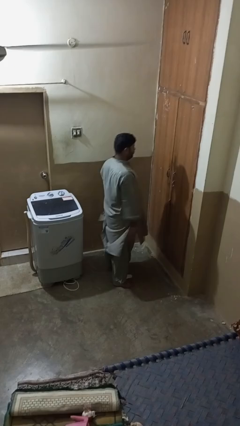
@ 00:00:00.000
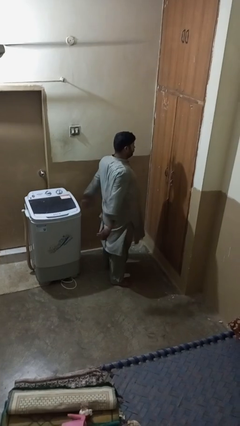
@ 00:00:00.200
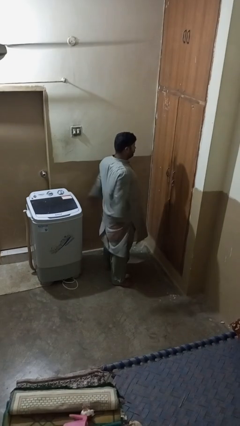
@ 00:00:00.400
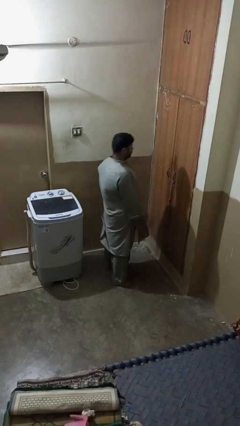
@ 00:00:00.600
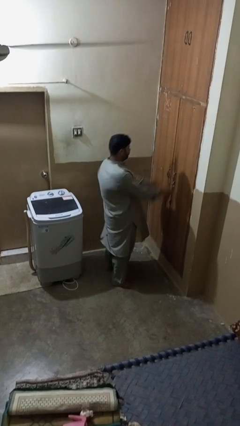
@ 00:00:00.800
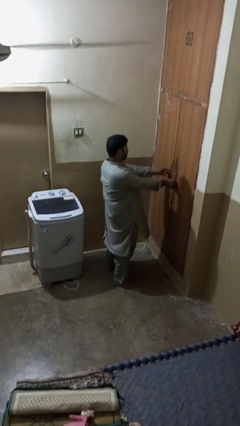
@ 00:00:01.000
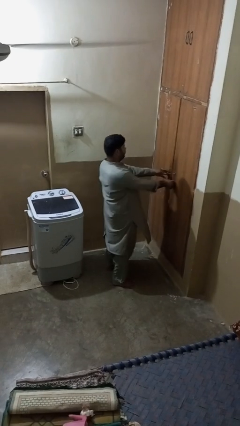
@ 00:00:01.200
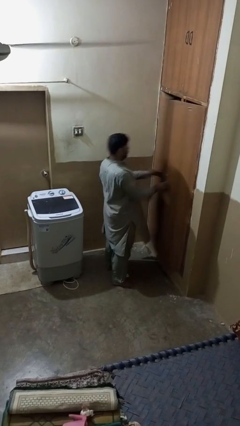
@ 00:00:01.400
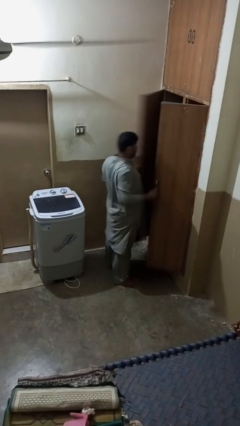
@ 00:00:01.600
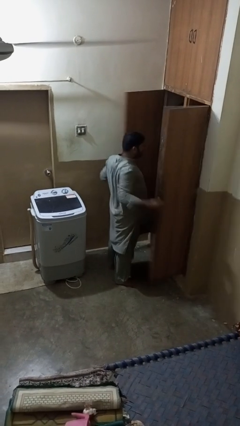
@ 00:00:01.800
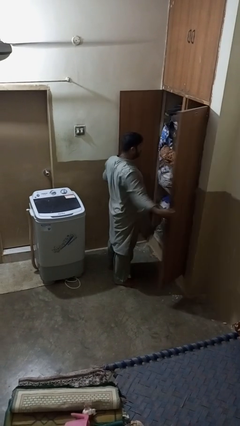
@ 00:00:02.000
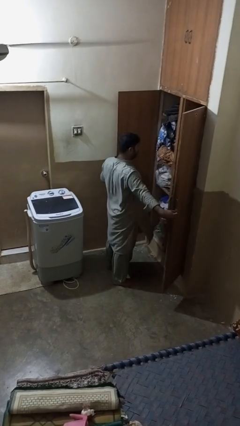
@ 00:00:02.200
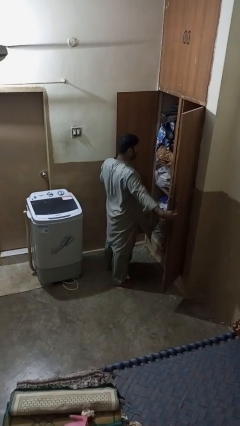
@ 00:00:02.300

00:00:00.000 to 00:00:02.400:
person opens closet door

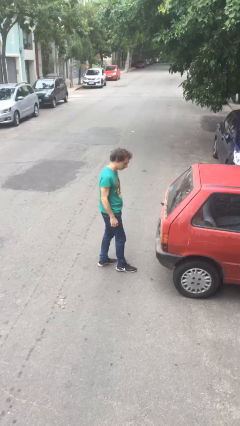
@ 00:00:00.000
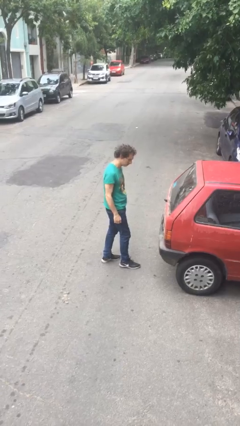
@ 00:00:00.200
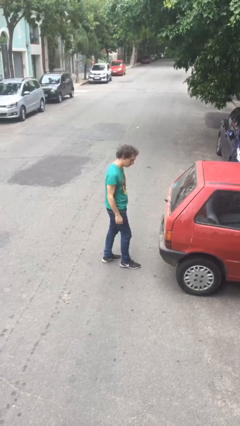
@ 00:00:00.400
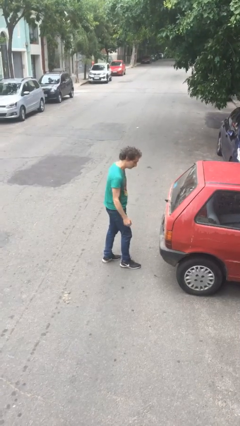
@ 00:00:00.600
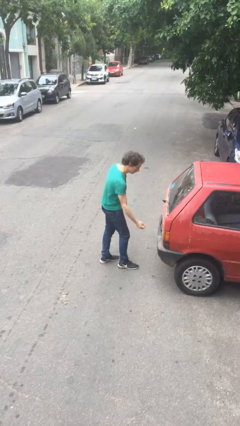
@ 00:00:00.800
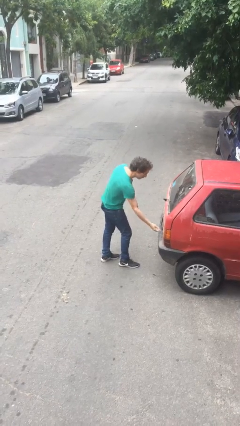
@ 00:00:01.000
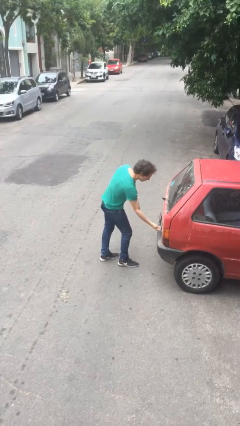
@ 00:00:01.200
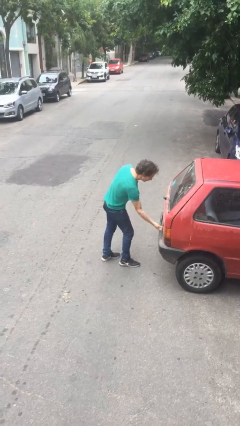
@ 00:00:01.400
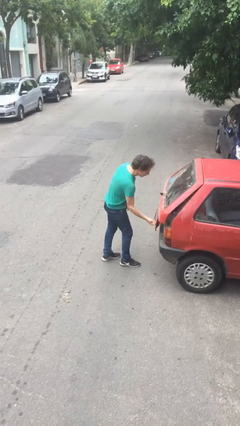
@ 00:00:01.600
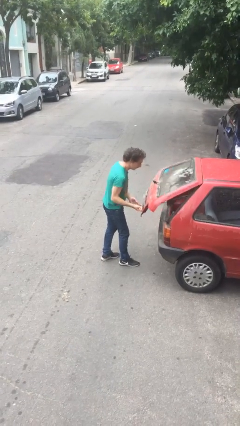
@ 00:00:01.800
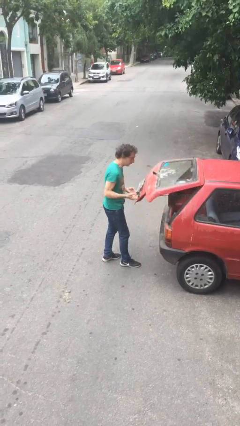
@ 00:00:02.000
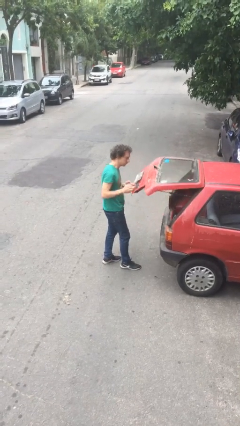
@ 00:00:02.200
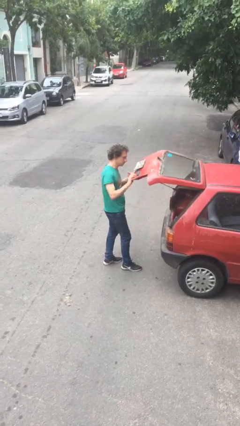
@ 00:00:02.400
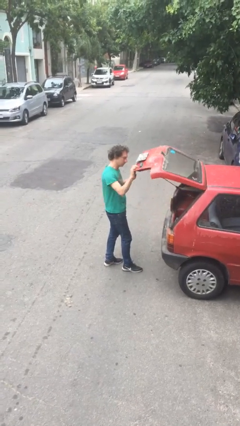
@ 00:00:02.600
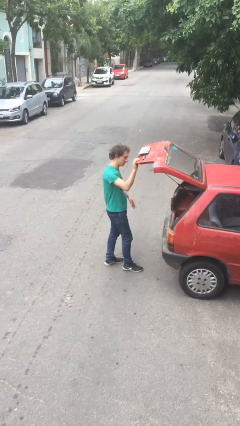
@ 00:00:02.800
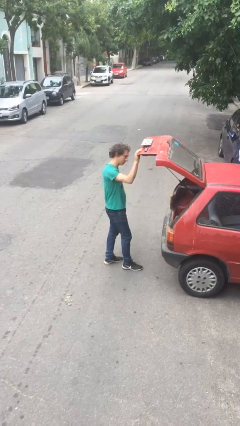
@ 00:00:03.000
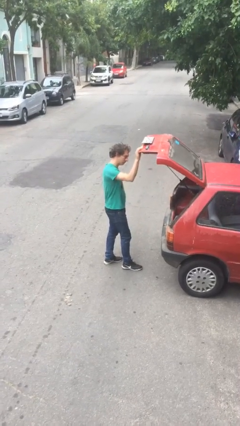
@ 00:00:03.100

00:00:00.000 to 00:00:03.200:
person opens car trunk

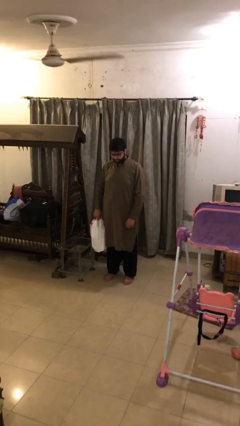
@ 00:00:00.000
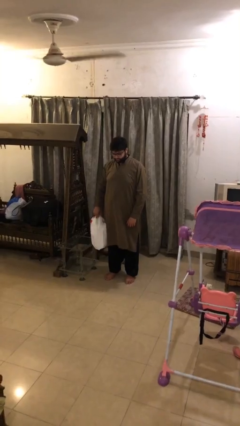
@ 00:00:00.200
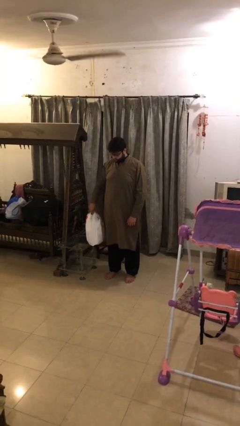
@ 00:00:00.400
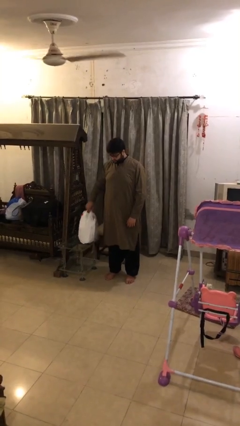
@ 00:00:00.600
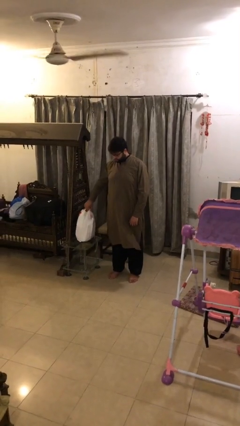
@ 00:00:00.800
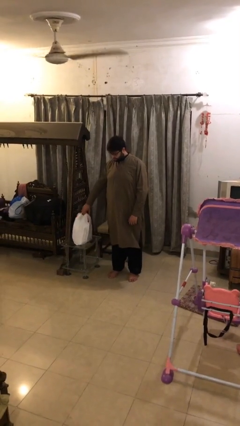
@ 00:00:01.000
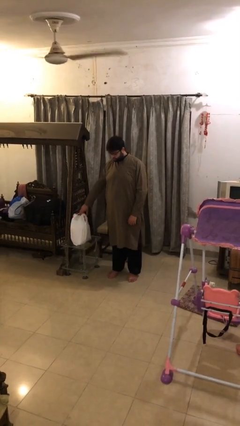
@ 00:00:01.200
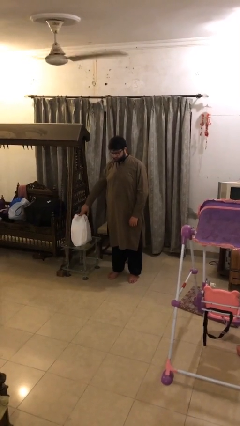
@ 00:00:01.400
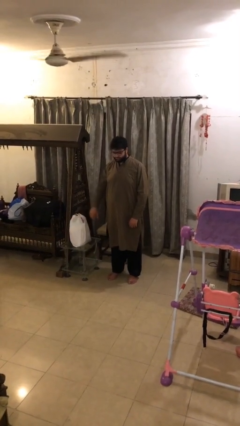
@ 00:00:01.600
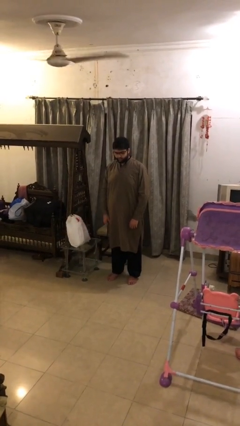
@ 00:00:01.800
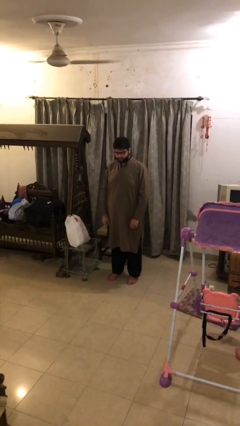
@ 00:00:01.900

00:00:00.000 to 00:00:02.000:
person puts down object on table

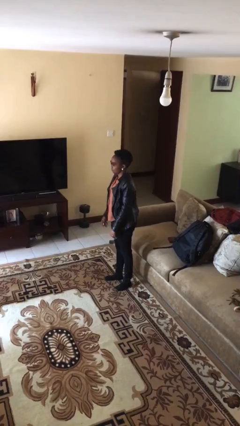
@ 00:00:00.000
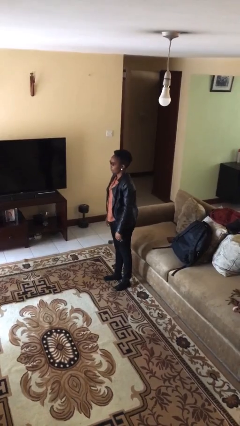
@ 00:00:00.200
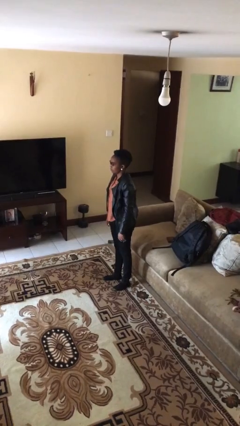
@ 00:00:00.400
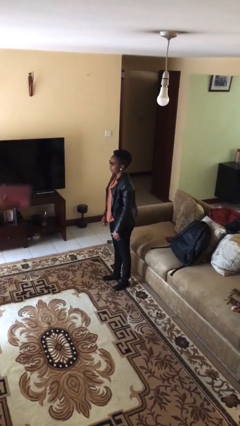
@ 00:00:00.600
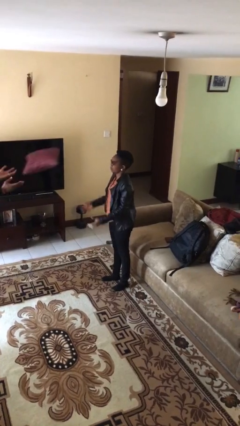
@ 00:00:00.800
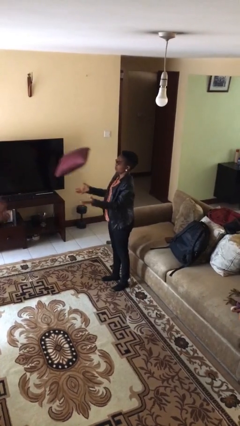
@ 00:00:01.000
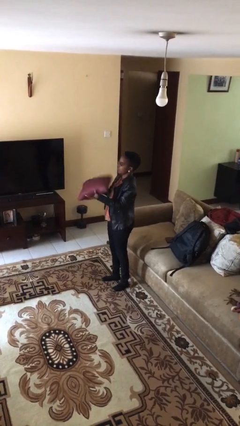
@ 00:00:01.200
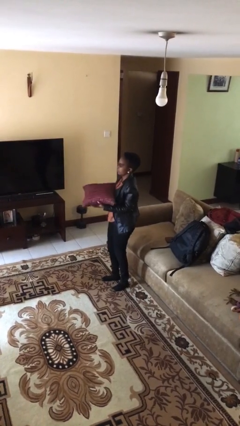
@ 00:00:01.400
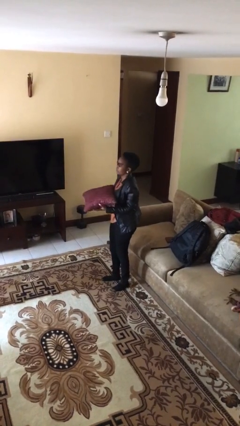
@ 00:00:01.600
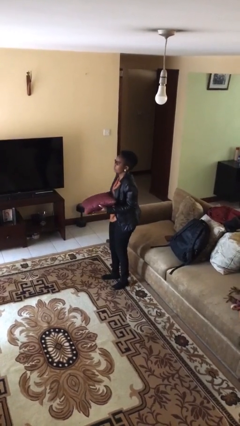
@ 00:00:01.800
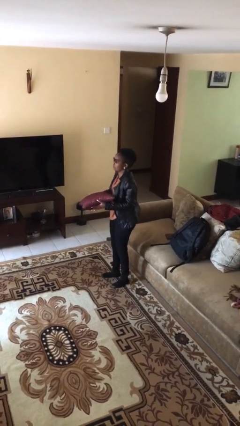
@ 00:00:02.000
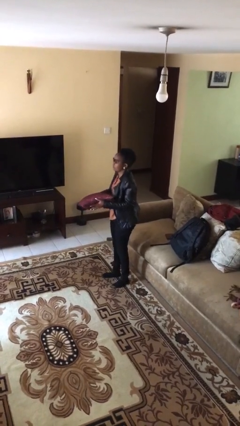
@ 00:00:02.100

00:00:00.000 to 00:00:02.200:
person catches object from person

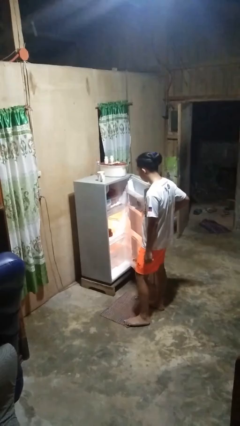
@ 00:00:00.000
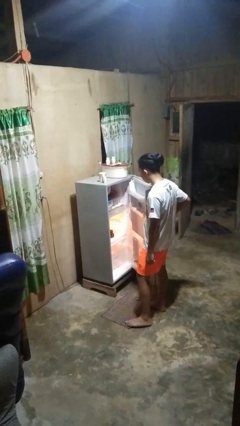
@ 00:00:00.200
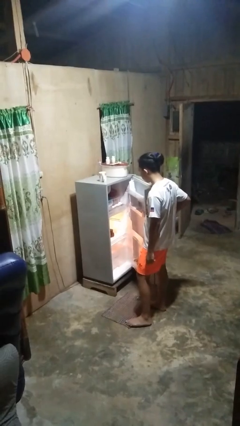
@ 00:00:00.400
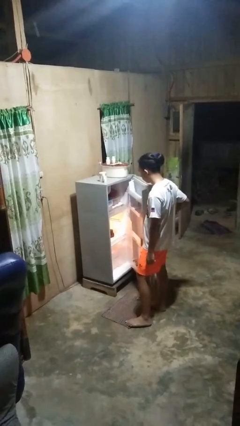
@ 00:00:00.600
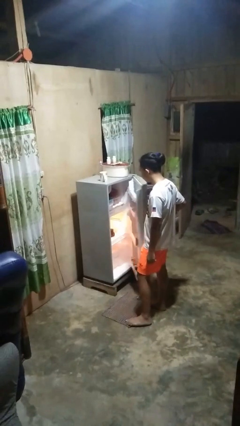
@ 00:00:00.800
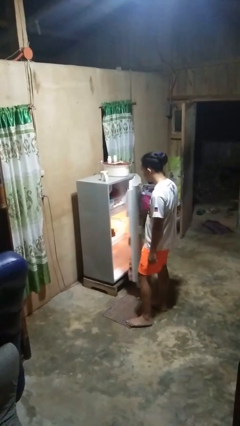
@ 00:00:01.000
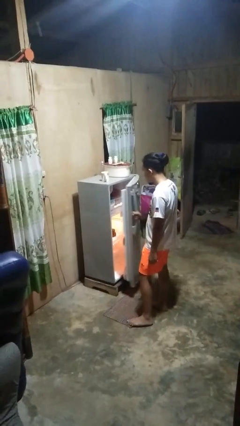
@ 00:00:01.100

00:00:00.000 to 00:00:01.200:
person closes refrigerator

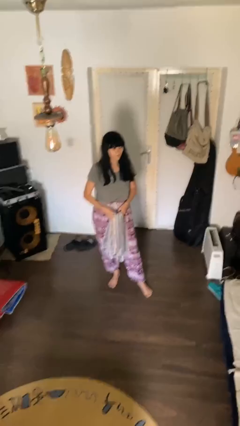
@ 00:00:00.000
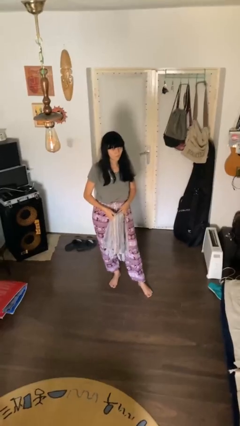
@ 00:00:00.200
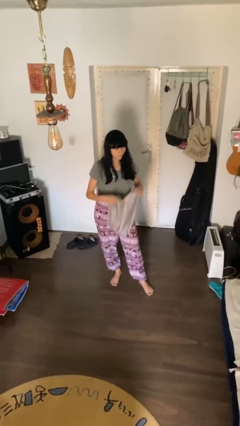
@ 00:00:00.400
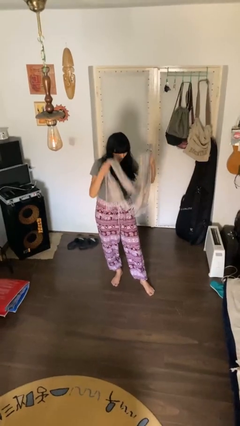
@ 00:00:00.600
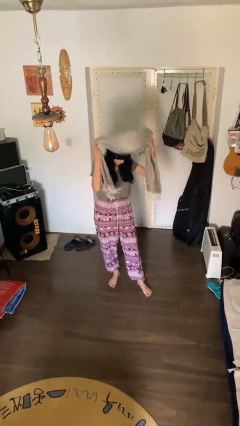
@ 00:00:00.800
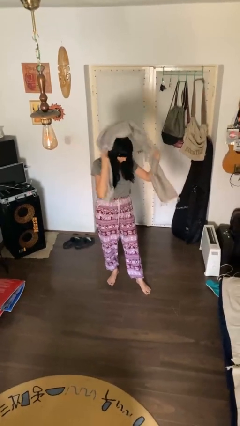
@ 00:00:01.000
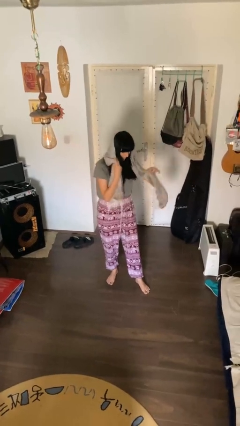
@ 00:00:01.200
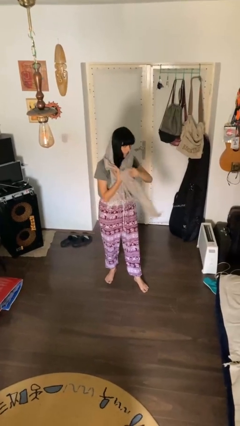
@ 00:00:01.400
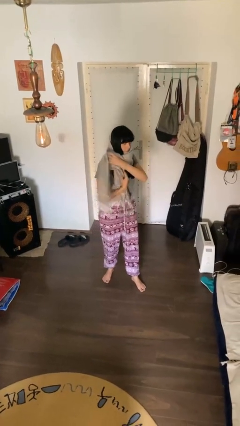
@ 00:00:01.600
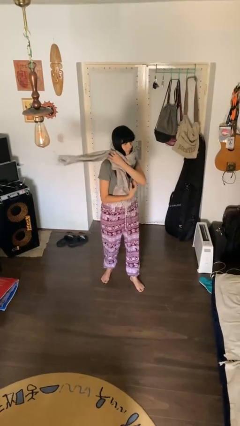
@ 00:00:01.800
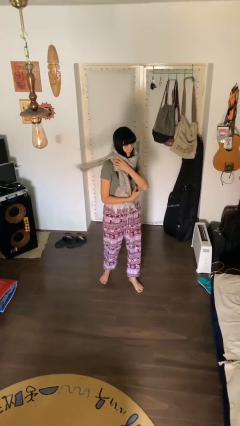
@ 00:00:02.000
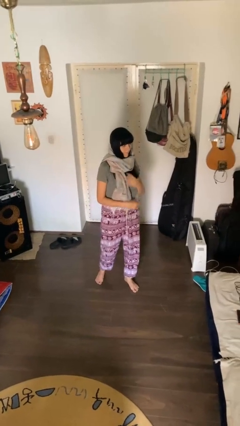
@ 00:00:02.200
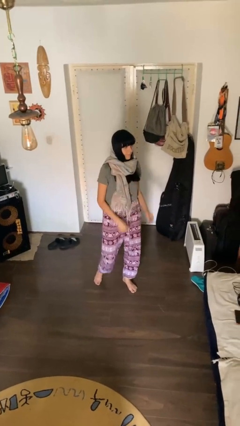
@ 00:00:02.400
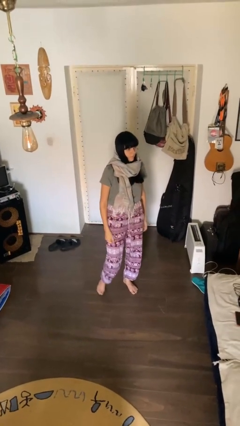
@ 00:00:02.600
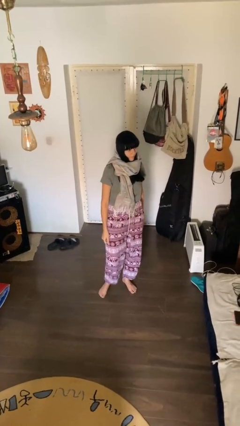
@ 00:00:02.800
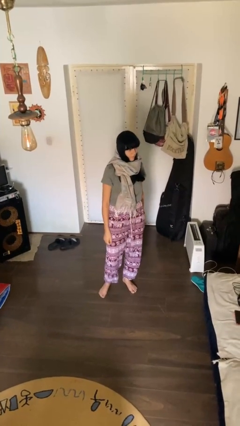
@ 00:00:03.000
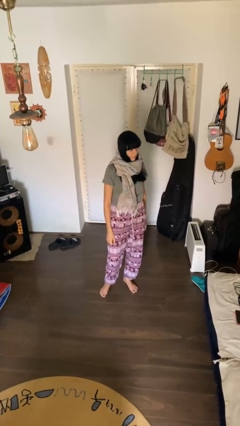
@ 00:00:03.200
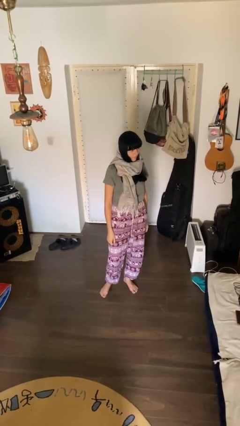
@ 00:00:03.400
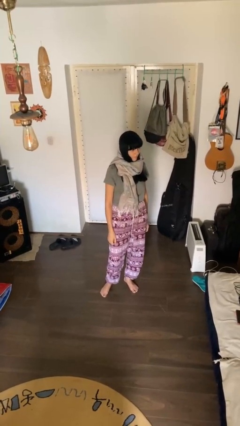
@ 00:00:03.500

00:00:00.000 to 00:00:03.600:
person puts on scarf

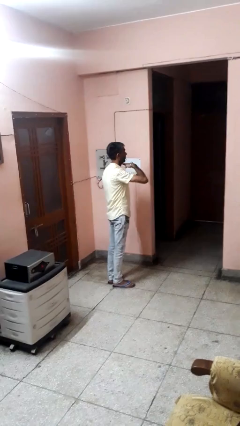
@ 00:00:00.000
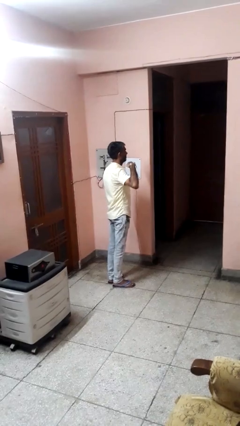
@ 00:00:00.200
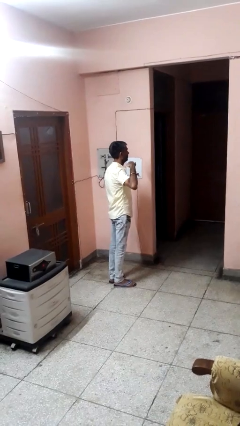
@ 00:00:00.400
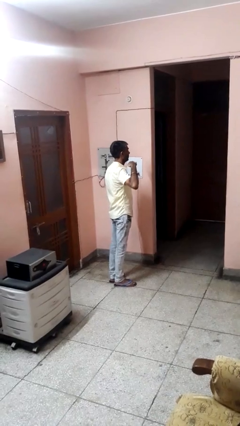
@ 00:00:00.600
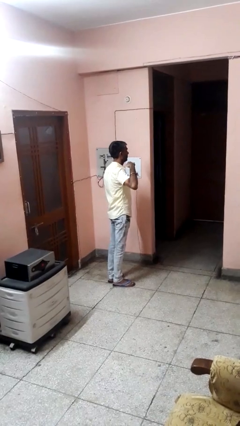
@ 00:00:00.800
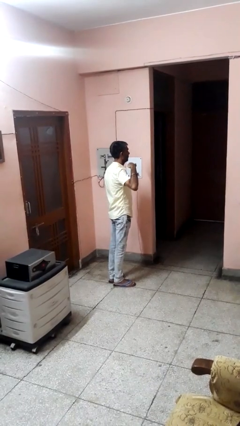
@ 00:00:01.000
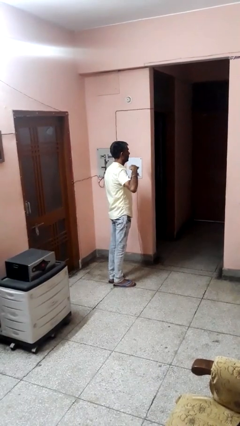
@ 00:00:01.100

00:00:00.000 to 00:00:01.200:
person gestures cut

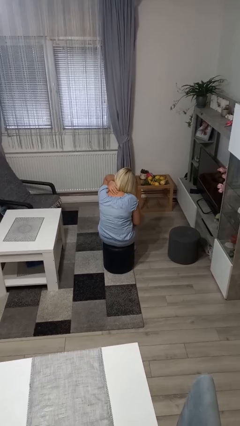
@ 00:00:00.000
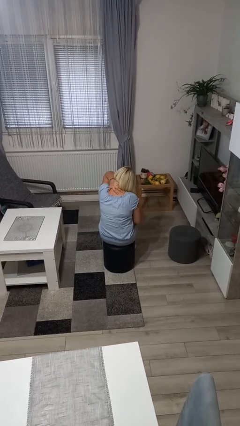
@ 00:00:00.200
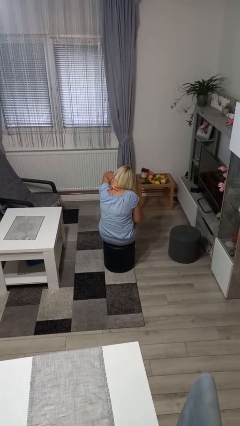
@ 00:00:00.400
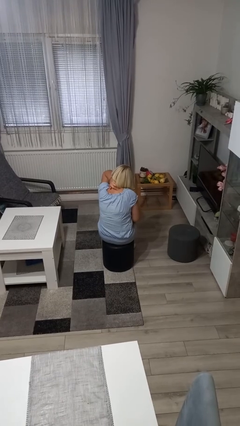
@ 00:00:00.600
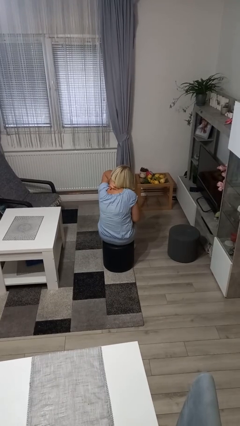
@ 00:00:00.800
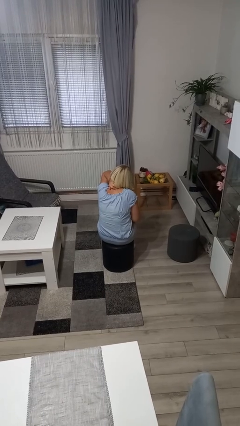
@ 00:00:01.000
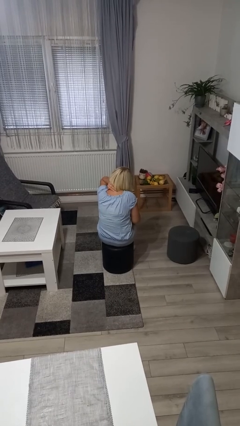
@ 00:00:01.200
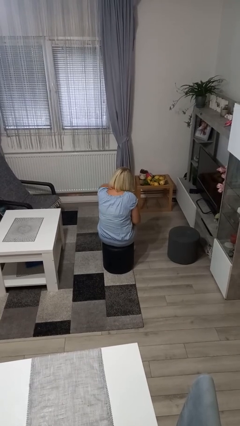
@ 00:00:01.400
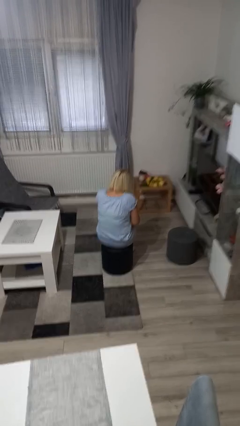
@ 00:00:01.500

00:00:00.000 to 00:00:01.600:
person rubs neck
